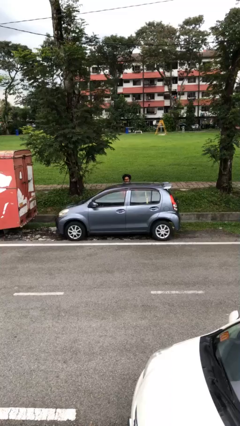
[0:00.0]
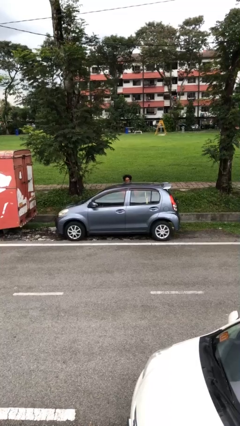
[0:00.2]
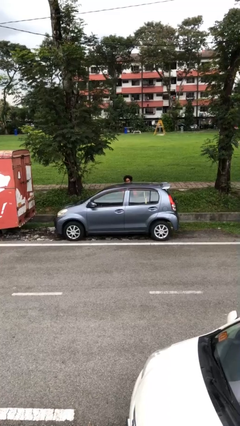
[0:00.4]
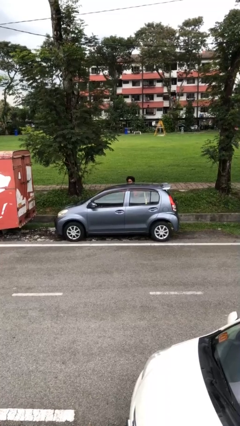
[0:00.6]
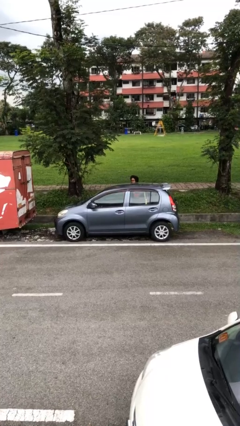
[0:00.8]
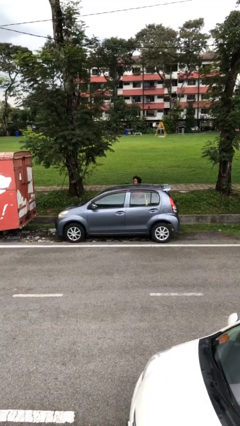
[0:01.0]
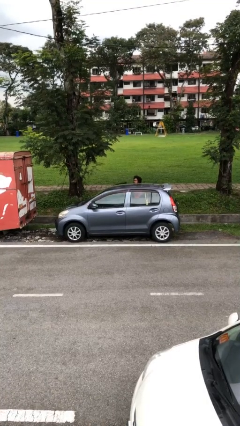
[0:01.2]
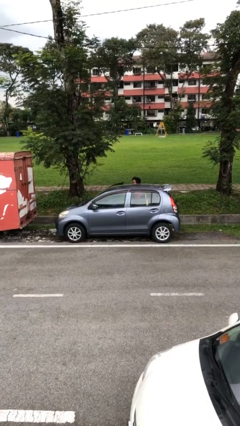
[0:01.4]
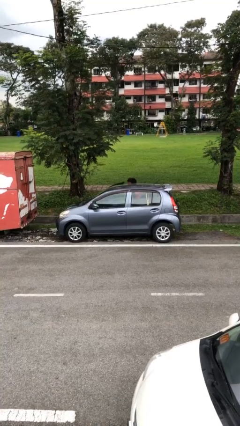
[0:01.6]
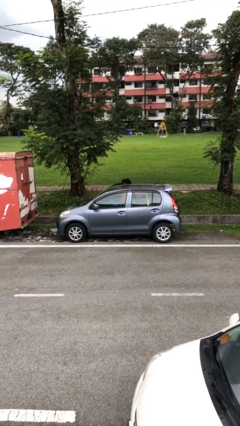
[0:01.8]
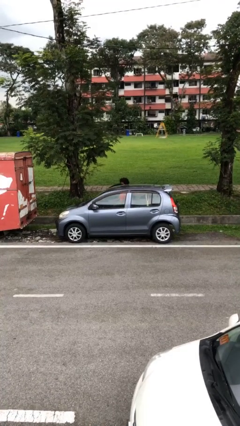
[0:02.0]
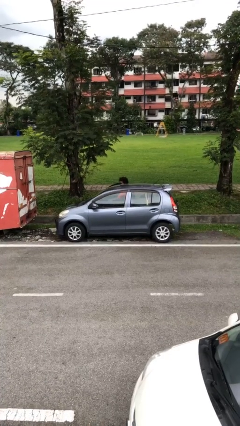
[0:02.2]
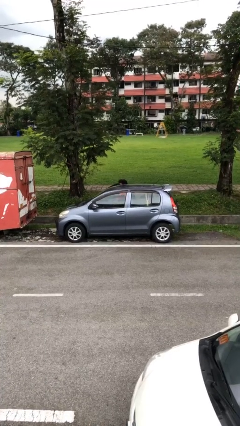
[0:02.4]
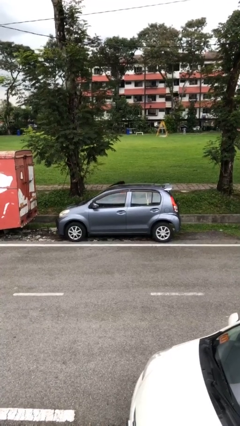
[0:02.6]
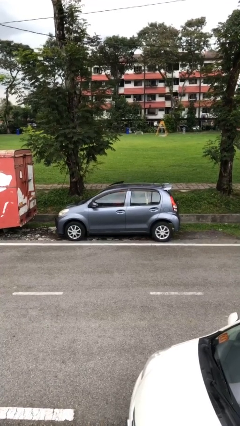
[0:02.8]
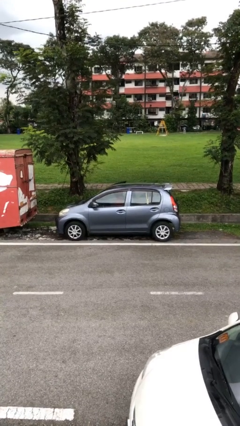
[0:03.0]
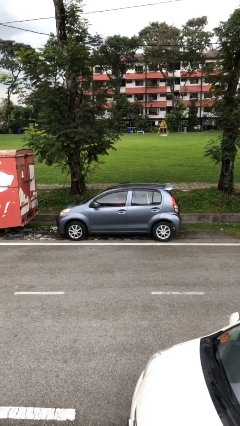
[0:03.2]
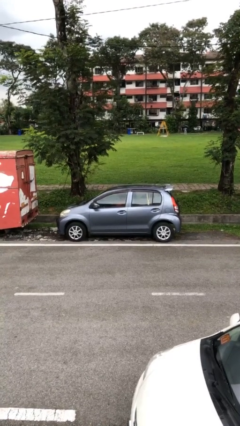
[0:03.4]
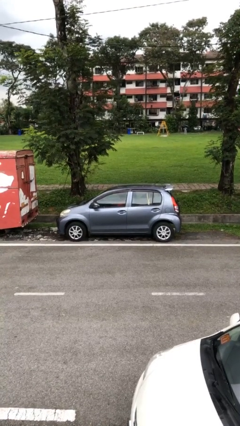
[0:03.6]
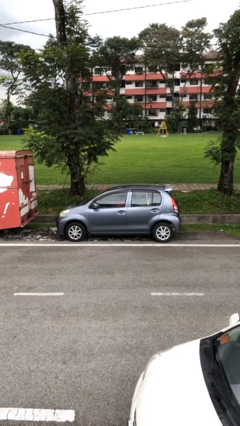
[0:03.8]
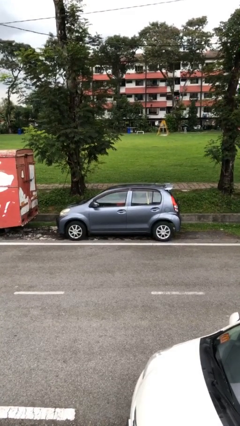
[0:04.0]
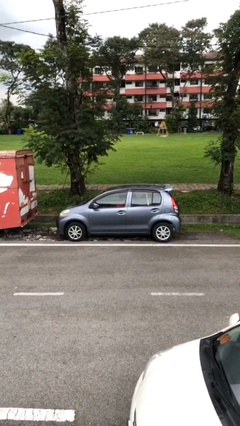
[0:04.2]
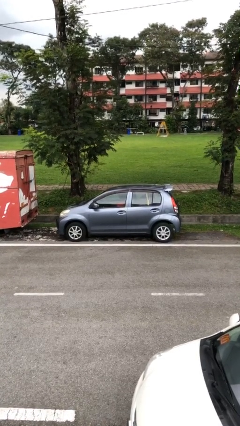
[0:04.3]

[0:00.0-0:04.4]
car picks up person

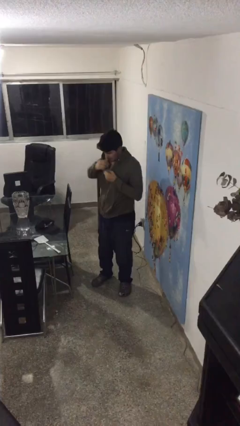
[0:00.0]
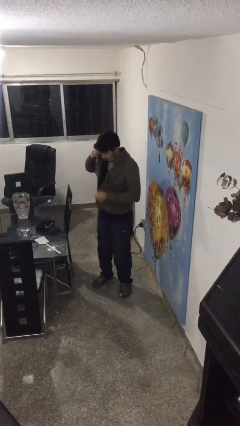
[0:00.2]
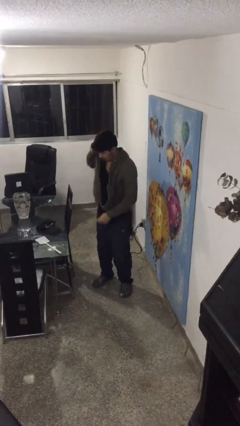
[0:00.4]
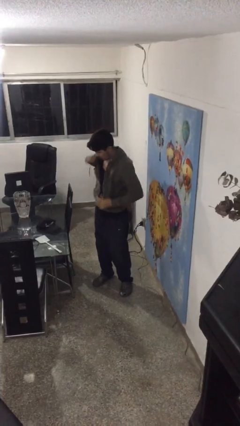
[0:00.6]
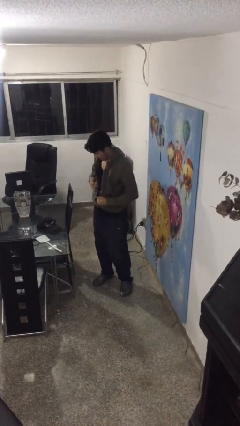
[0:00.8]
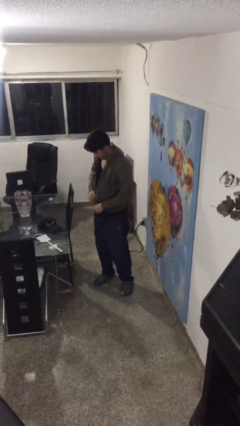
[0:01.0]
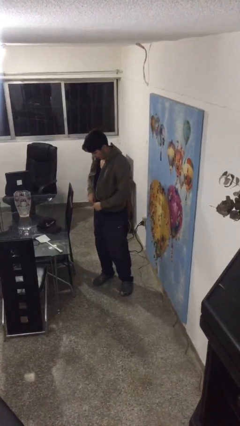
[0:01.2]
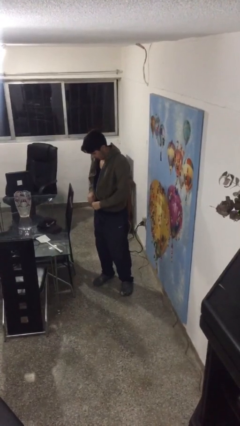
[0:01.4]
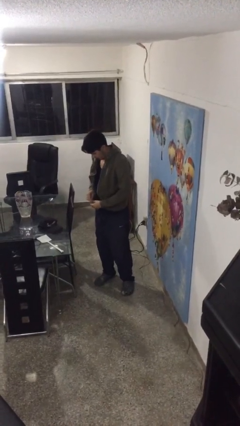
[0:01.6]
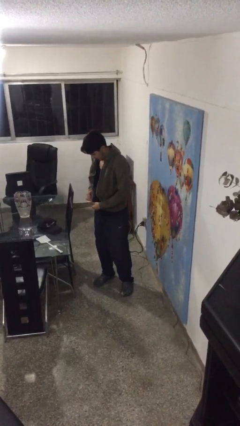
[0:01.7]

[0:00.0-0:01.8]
person unzips jacket

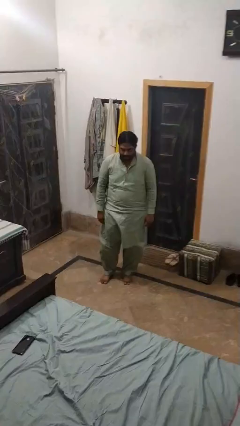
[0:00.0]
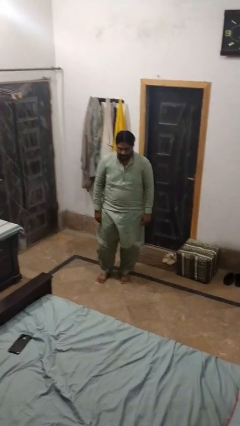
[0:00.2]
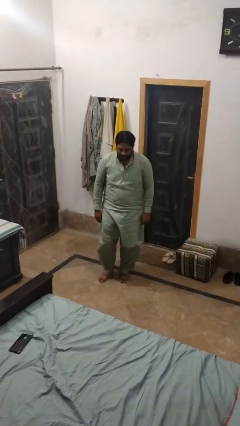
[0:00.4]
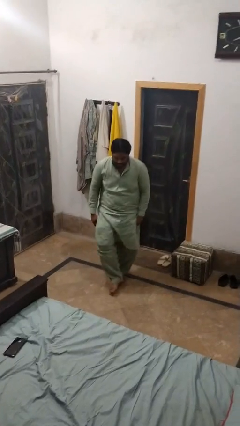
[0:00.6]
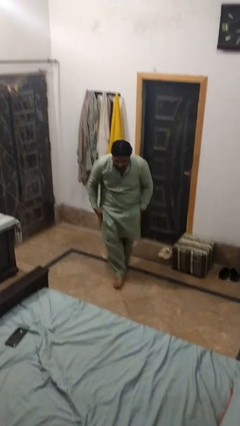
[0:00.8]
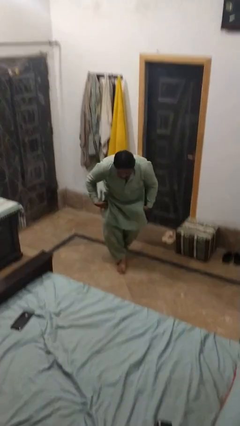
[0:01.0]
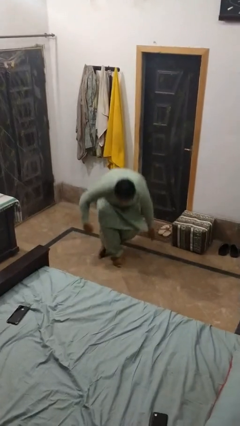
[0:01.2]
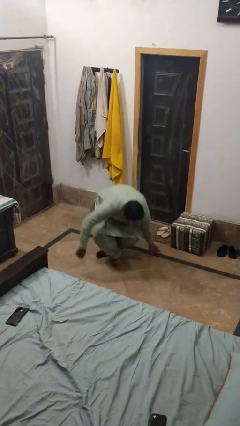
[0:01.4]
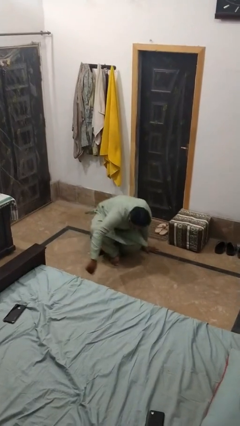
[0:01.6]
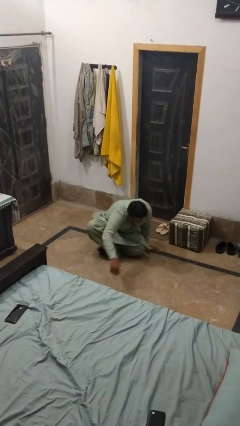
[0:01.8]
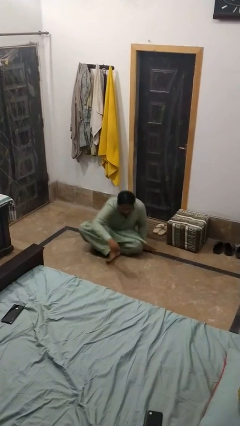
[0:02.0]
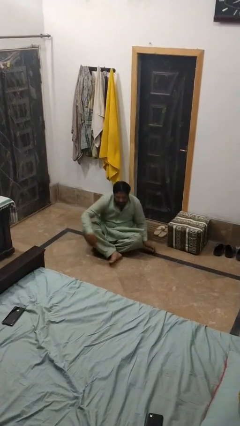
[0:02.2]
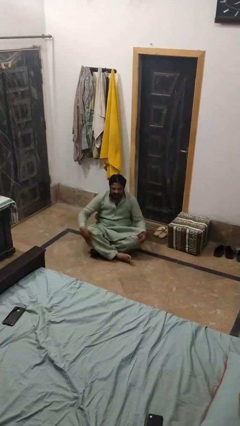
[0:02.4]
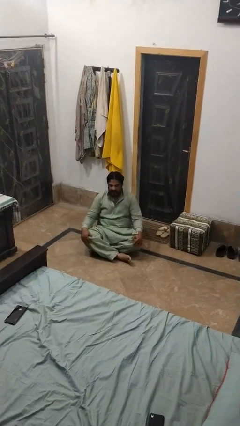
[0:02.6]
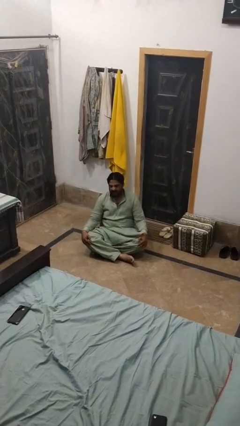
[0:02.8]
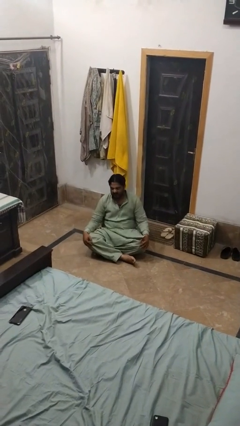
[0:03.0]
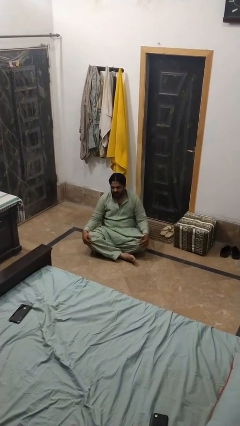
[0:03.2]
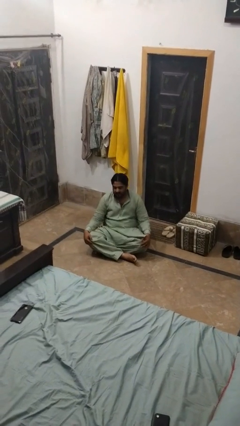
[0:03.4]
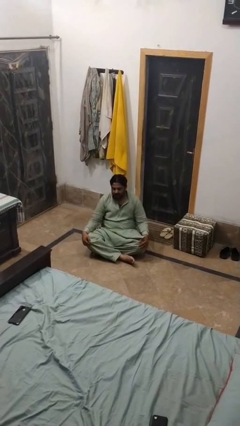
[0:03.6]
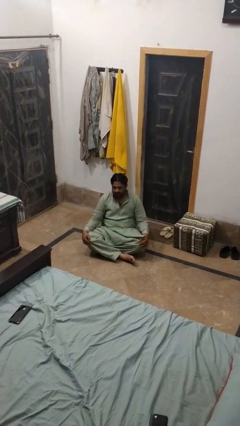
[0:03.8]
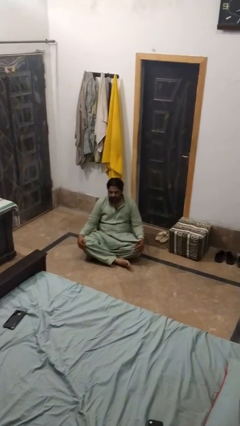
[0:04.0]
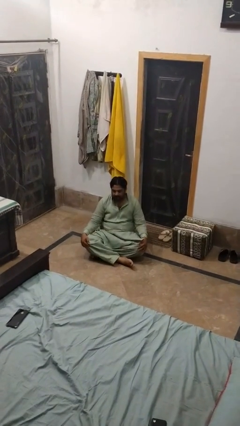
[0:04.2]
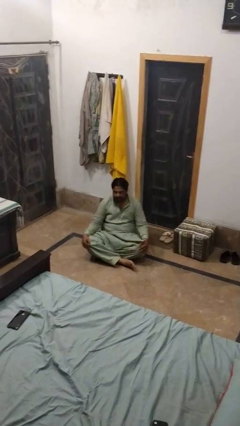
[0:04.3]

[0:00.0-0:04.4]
person sits crisscross

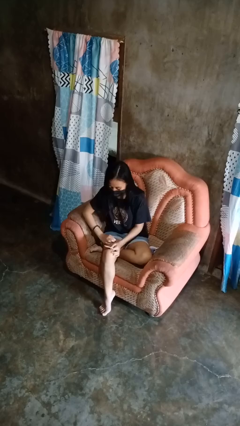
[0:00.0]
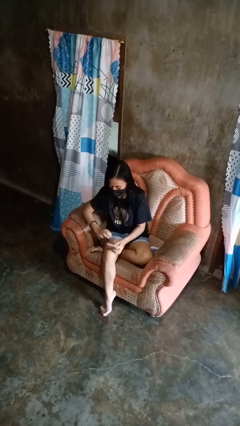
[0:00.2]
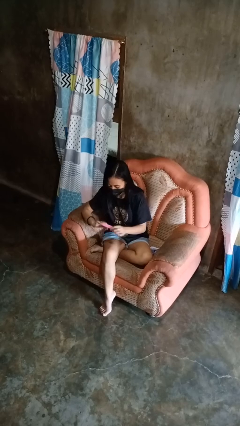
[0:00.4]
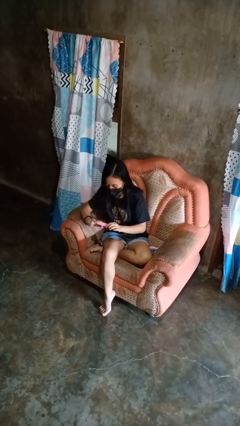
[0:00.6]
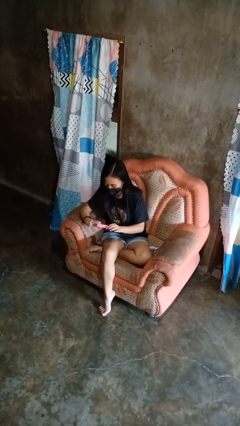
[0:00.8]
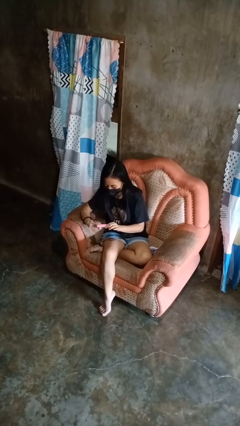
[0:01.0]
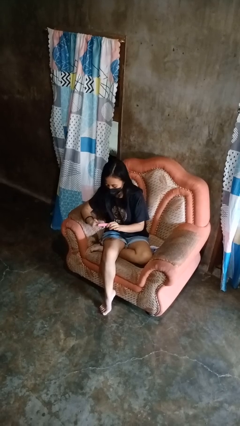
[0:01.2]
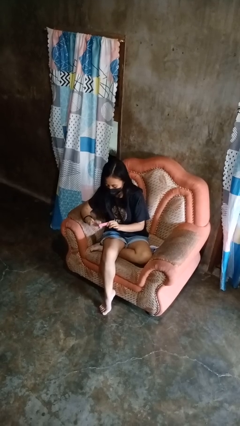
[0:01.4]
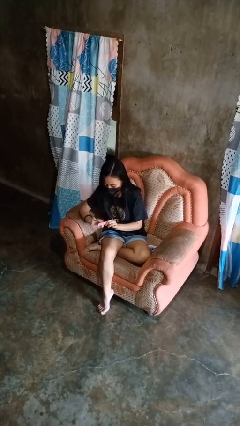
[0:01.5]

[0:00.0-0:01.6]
person files fingernails

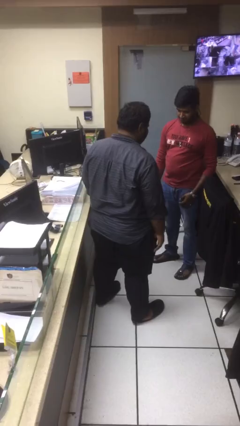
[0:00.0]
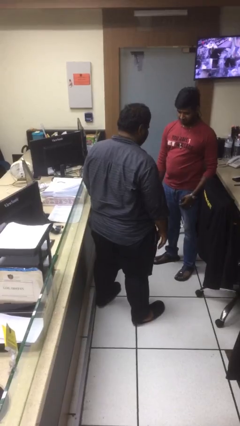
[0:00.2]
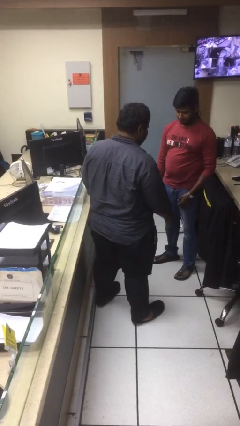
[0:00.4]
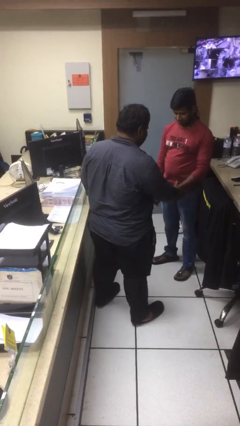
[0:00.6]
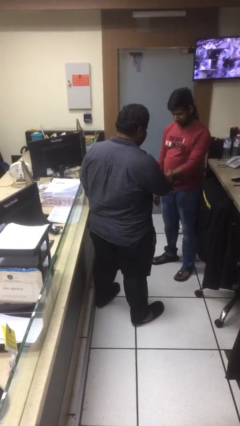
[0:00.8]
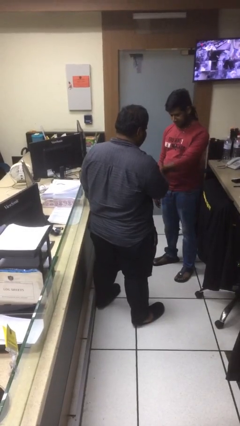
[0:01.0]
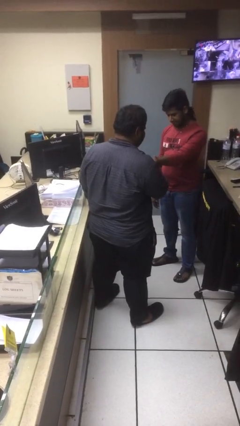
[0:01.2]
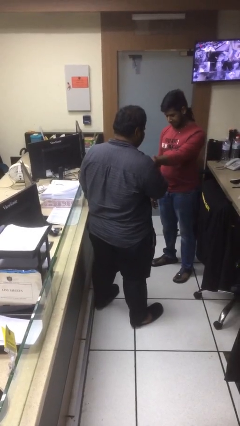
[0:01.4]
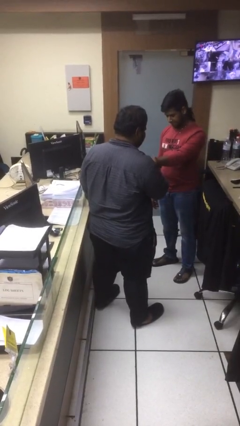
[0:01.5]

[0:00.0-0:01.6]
person grabs person by forearm

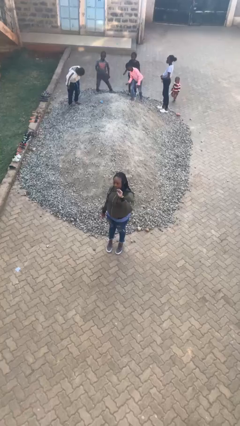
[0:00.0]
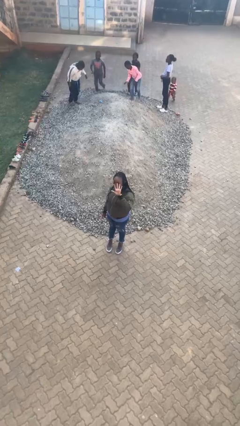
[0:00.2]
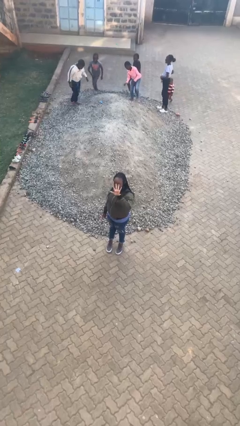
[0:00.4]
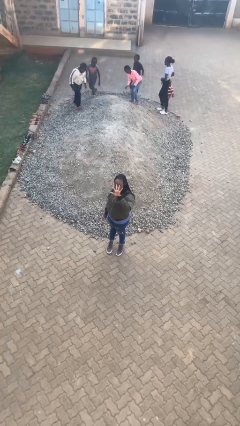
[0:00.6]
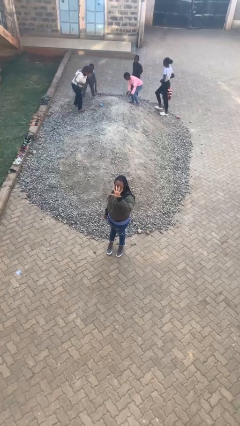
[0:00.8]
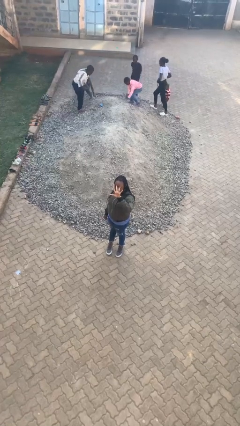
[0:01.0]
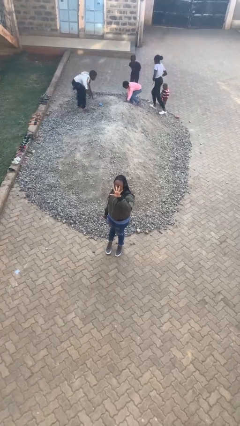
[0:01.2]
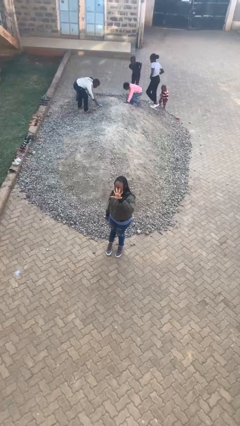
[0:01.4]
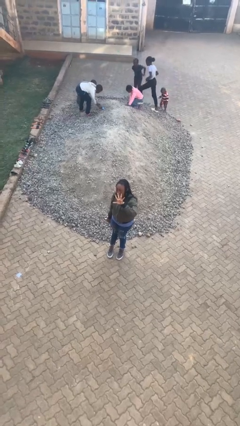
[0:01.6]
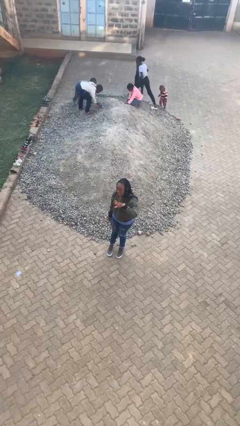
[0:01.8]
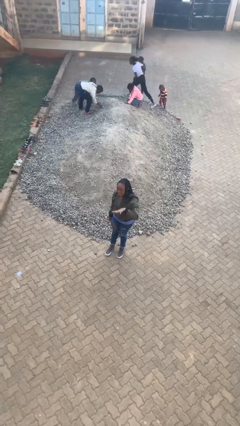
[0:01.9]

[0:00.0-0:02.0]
person gestures number five

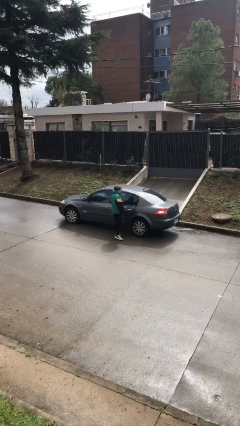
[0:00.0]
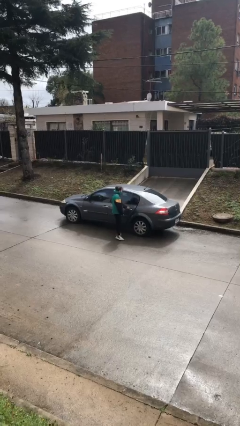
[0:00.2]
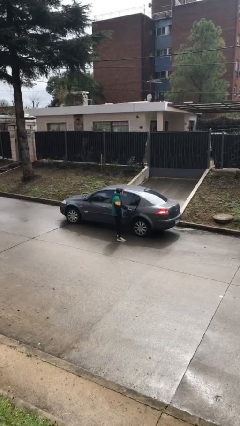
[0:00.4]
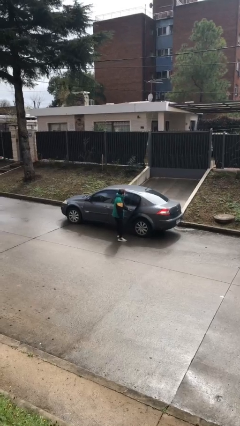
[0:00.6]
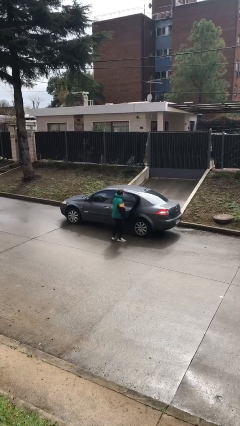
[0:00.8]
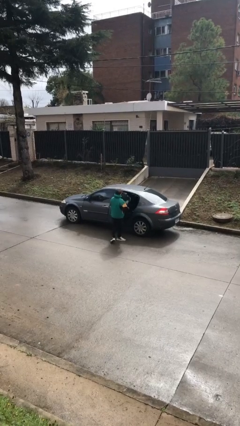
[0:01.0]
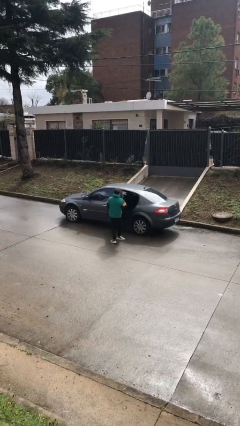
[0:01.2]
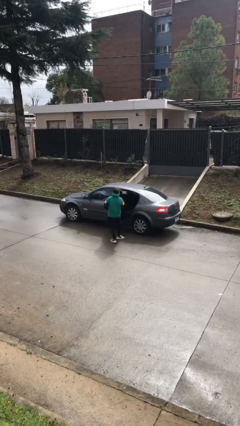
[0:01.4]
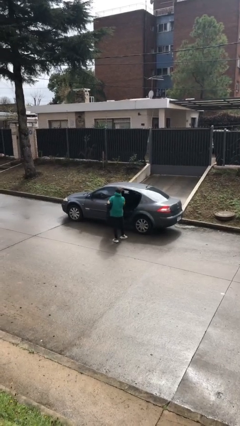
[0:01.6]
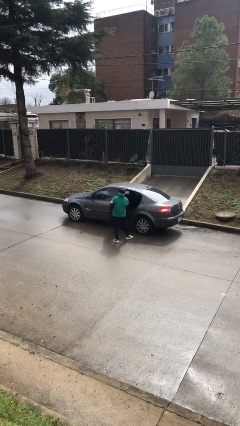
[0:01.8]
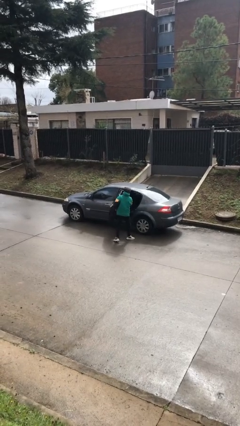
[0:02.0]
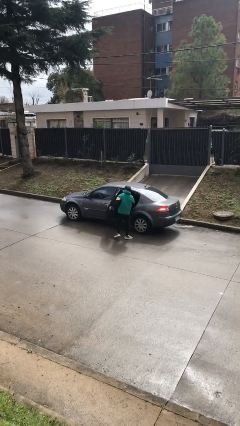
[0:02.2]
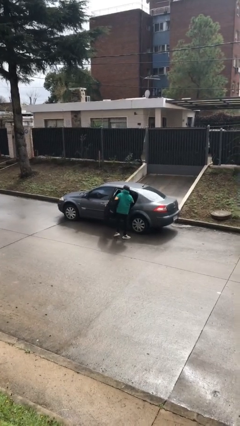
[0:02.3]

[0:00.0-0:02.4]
person opens car door
